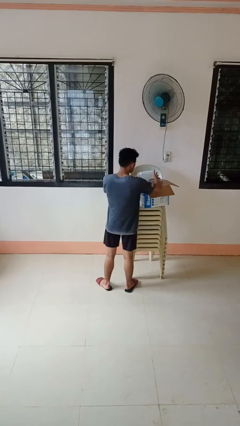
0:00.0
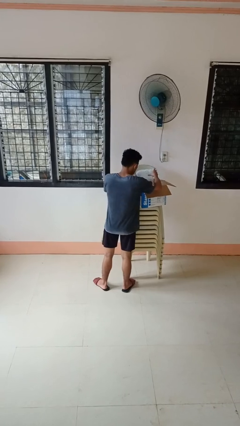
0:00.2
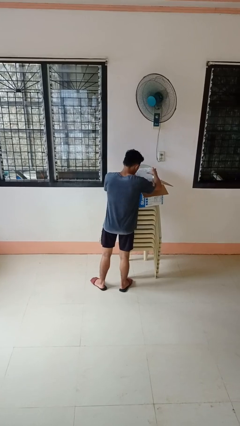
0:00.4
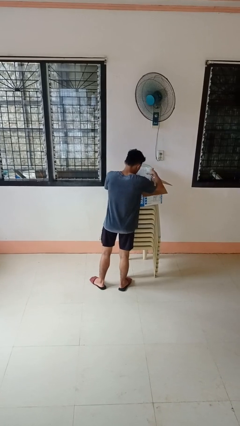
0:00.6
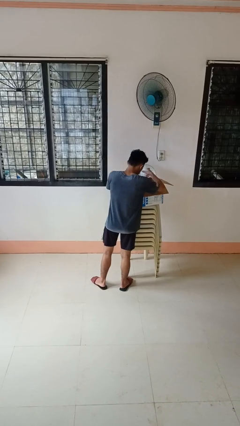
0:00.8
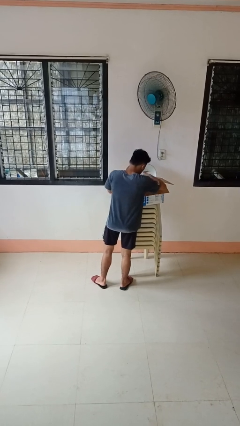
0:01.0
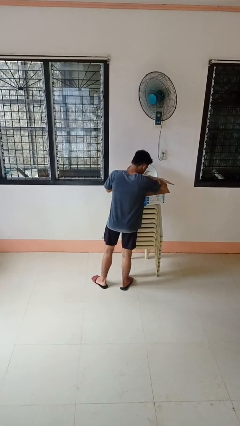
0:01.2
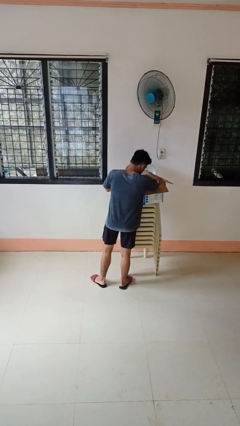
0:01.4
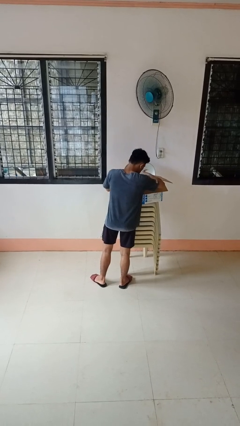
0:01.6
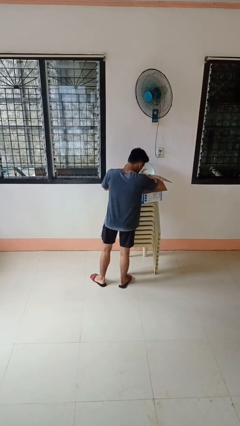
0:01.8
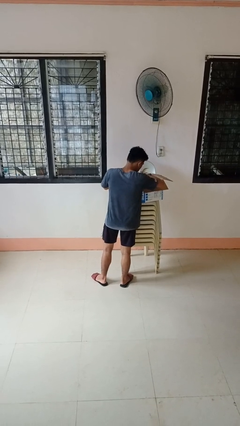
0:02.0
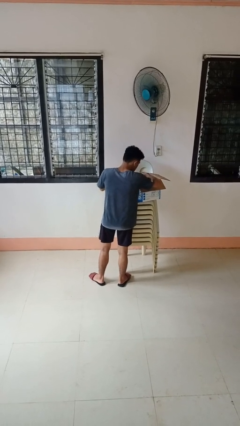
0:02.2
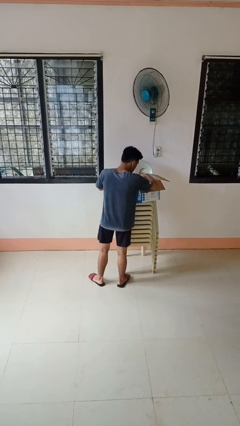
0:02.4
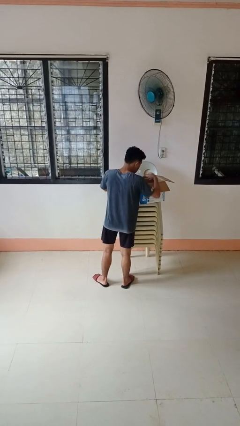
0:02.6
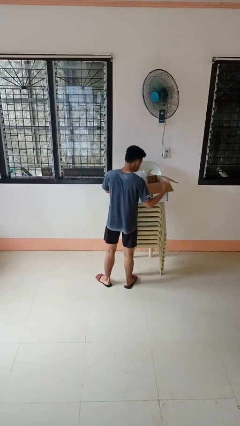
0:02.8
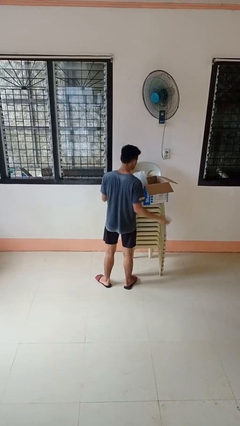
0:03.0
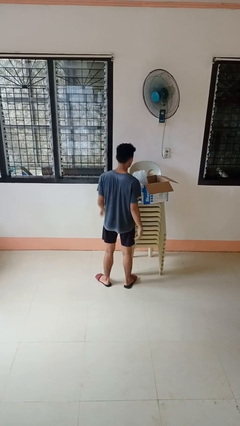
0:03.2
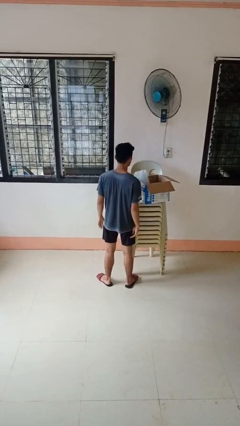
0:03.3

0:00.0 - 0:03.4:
person searches in box

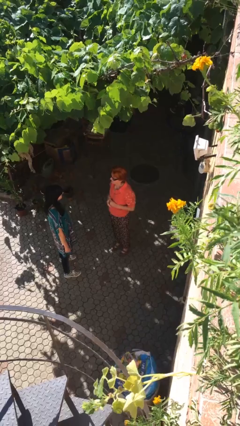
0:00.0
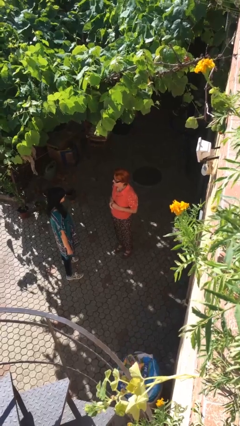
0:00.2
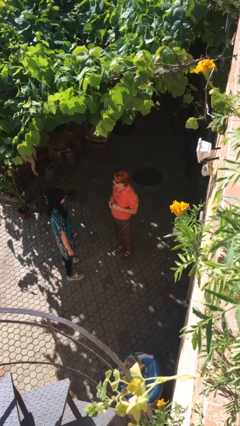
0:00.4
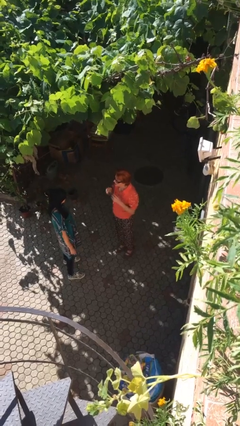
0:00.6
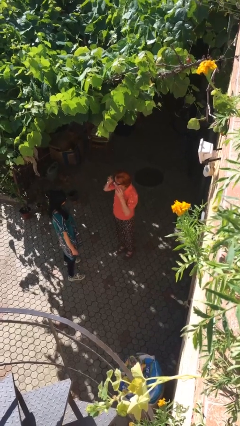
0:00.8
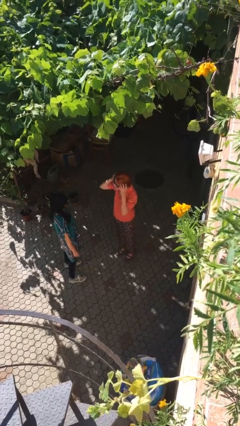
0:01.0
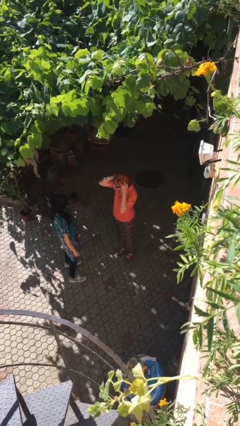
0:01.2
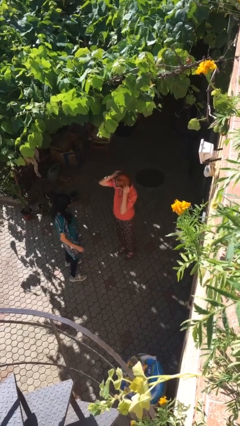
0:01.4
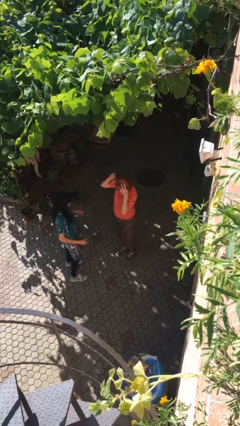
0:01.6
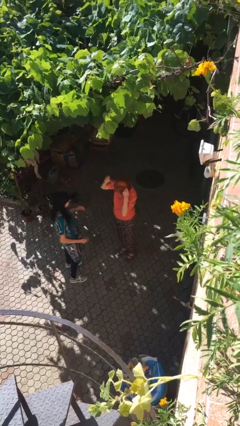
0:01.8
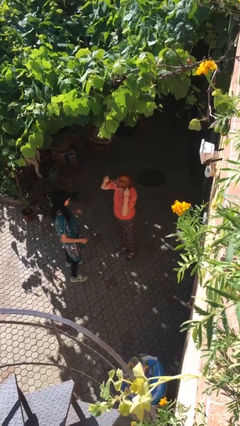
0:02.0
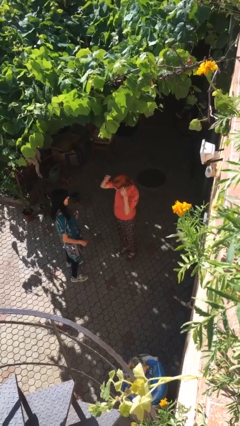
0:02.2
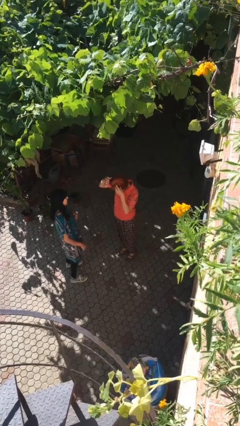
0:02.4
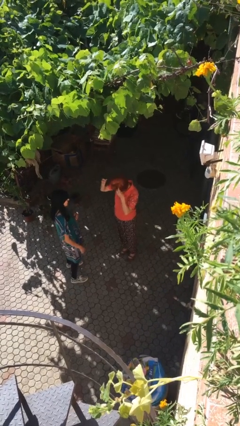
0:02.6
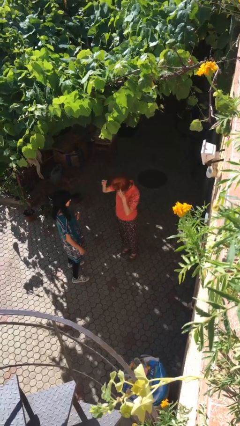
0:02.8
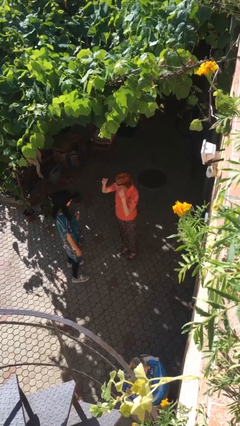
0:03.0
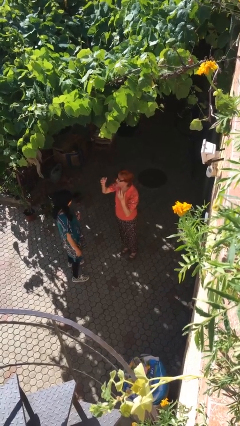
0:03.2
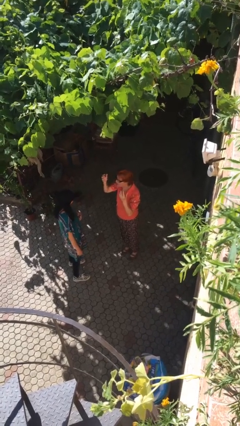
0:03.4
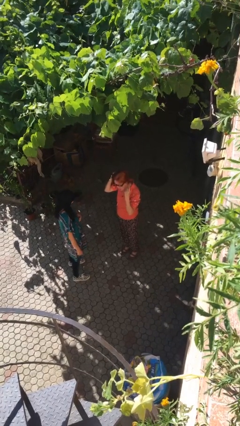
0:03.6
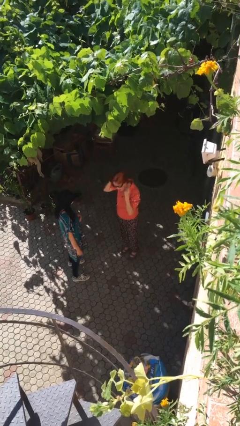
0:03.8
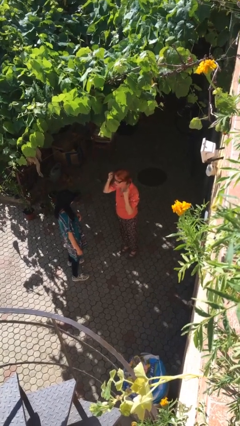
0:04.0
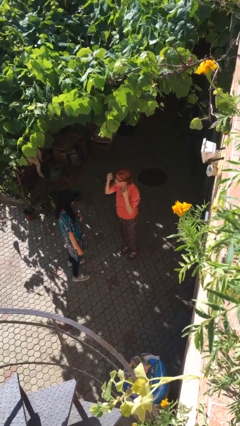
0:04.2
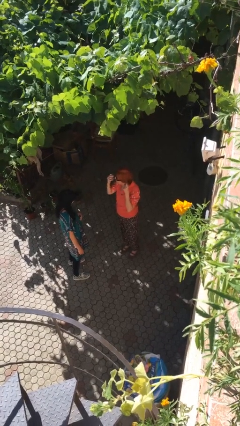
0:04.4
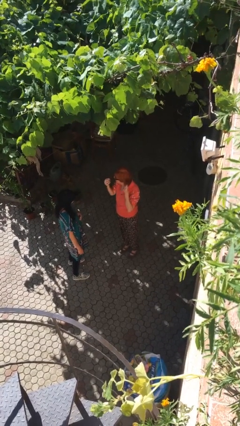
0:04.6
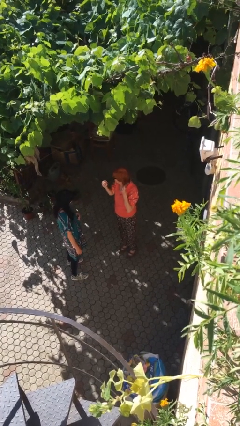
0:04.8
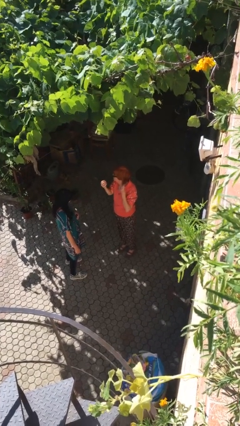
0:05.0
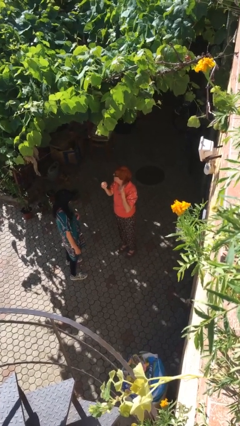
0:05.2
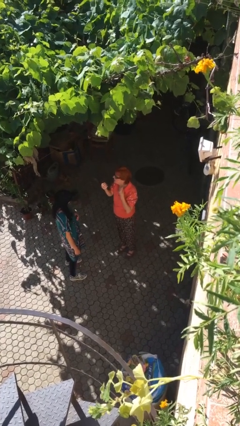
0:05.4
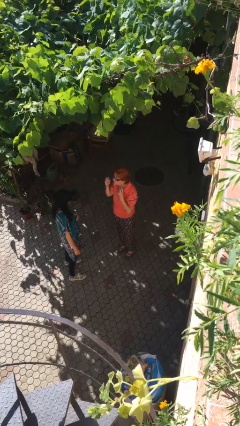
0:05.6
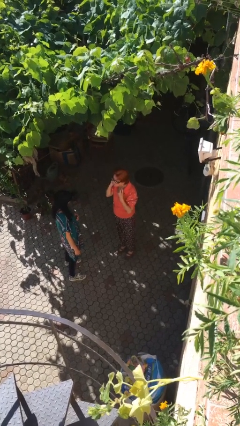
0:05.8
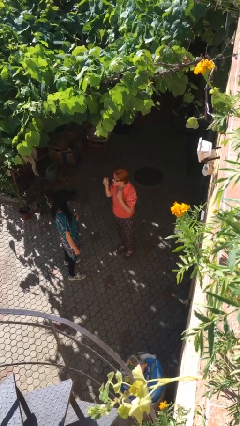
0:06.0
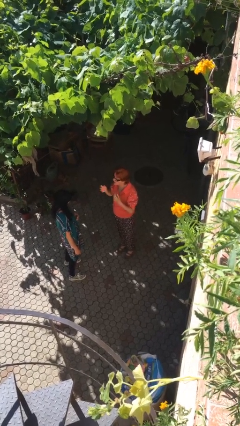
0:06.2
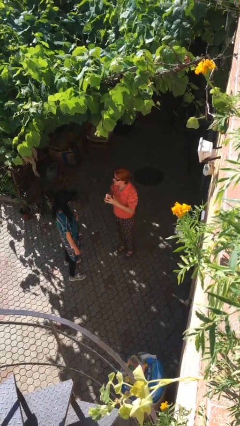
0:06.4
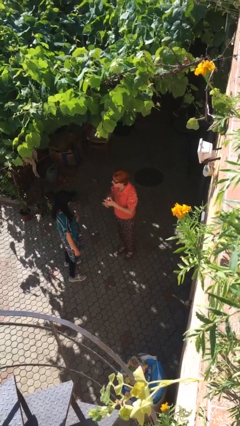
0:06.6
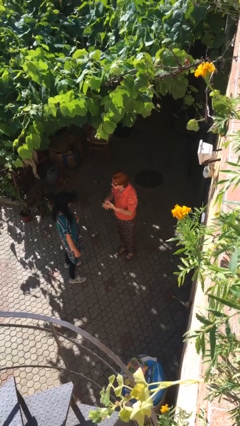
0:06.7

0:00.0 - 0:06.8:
person talks to person

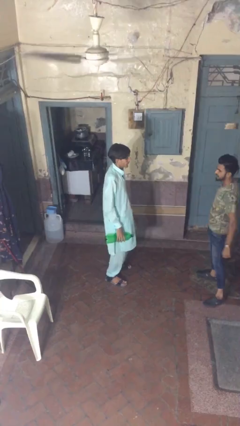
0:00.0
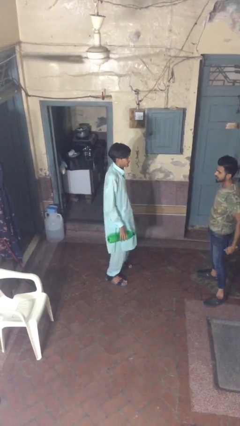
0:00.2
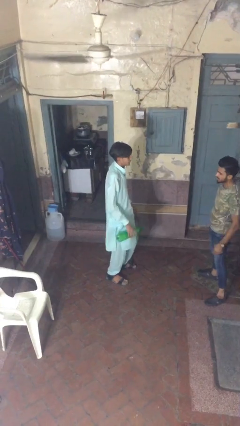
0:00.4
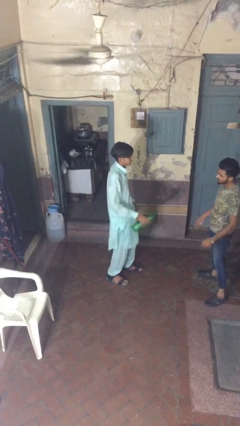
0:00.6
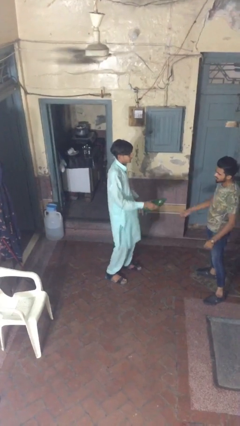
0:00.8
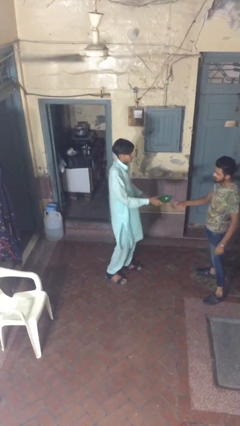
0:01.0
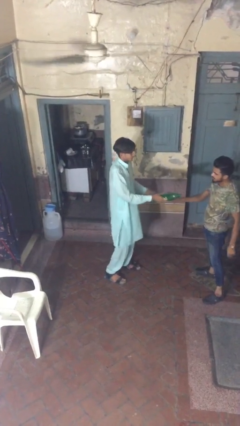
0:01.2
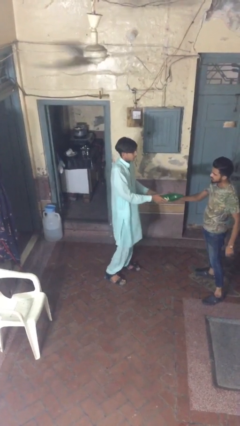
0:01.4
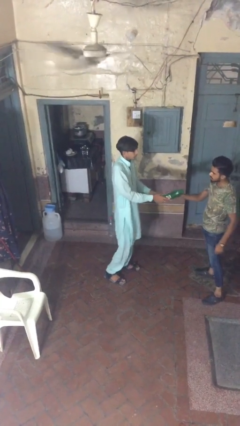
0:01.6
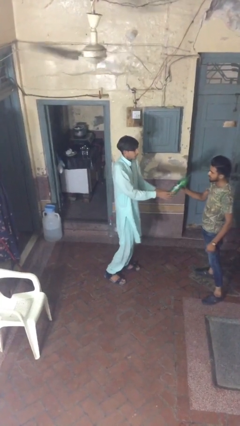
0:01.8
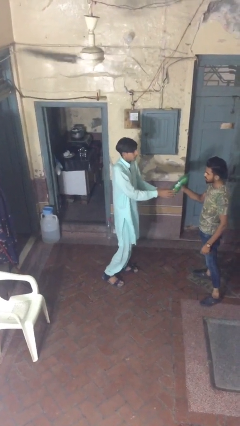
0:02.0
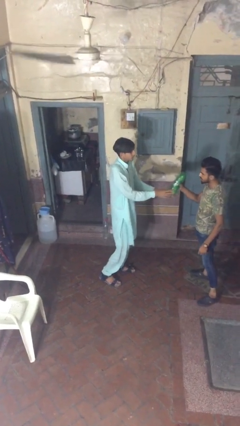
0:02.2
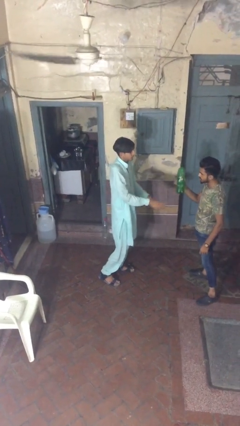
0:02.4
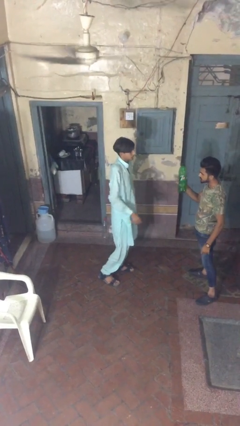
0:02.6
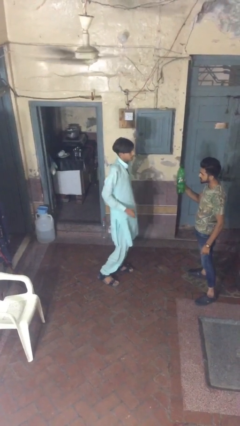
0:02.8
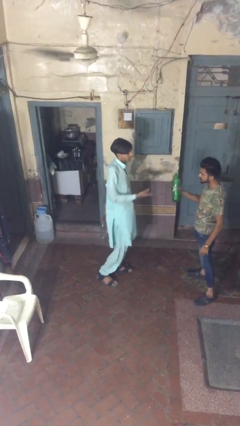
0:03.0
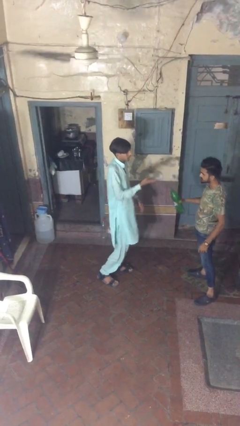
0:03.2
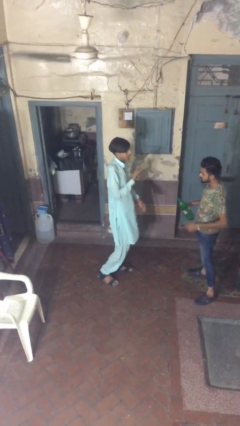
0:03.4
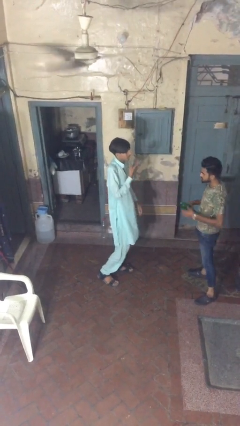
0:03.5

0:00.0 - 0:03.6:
person transfers object to person

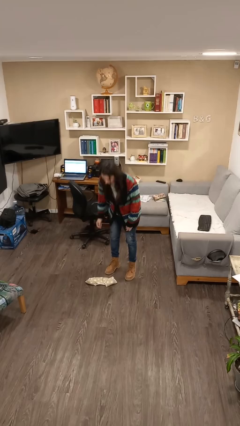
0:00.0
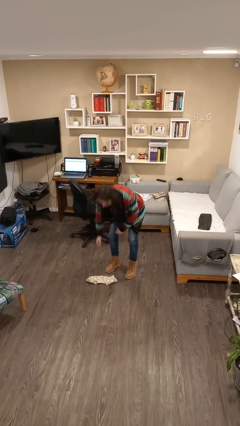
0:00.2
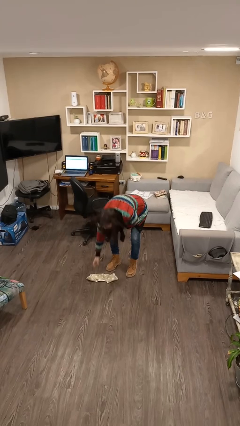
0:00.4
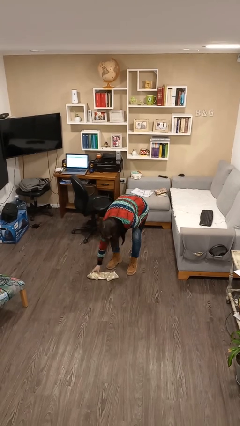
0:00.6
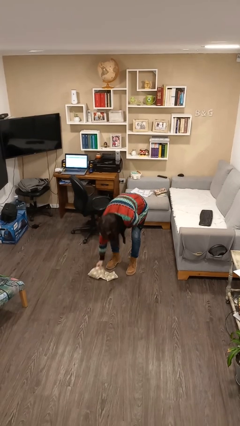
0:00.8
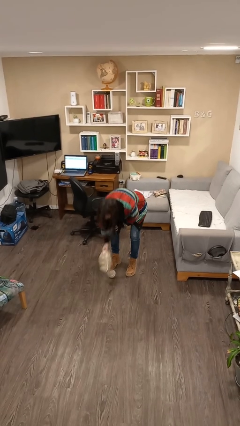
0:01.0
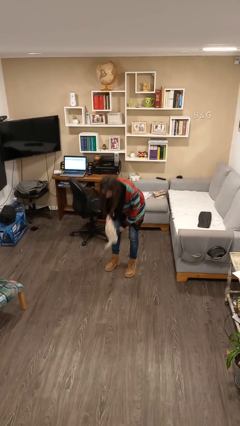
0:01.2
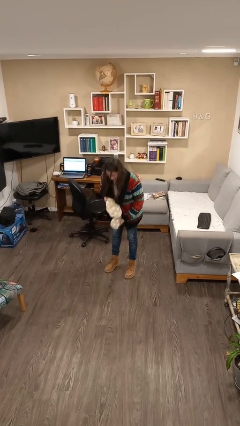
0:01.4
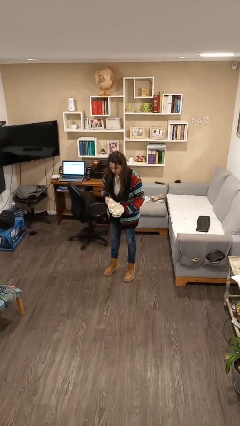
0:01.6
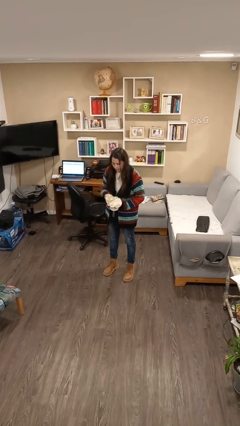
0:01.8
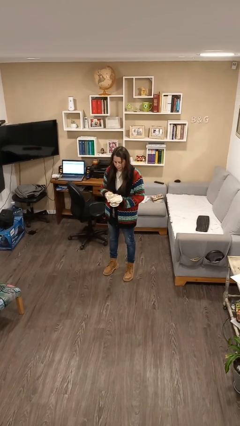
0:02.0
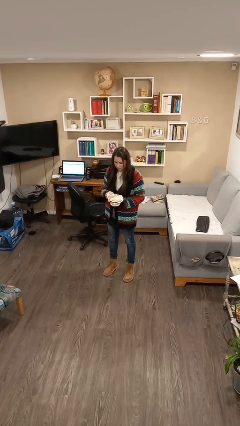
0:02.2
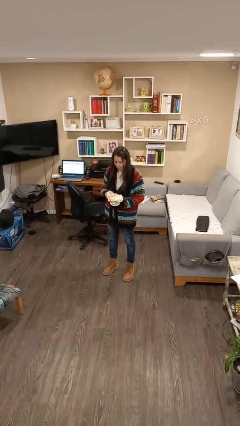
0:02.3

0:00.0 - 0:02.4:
person picks up object from floor

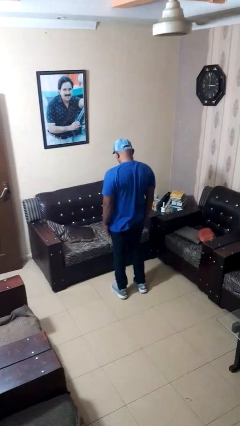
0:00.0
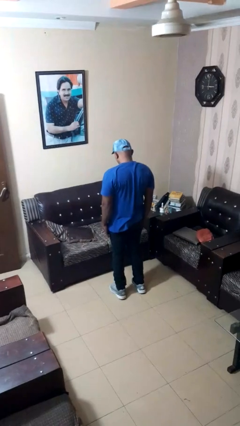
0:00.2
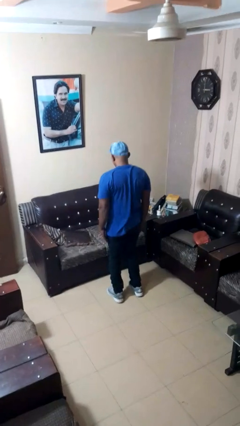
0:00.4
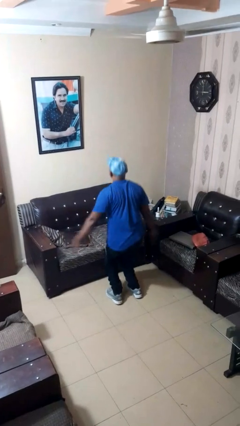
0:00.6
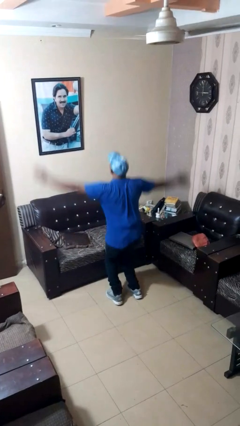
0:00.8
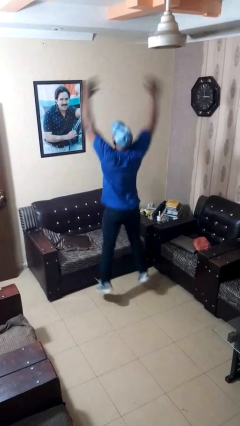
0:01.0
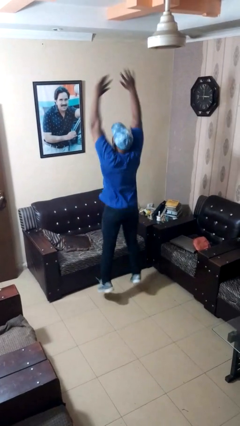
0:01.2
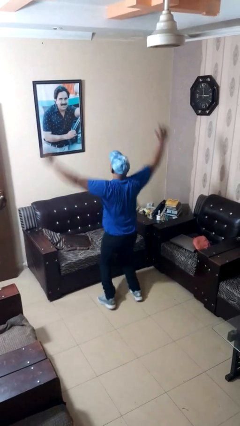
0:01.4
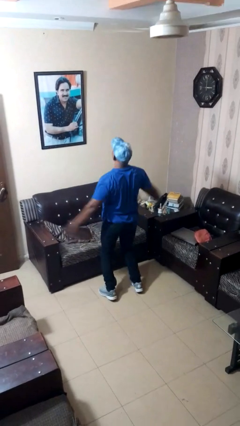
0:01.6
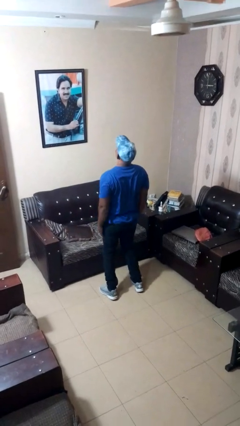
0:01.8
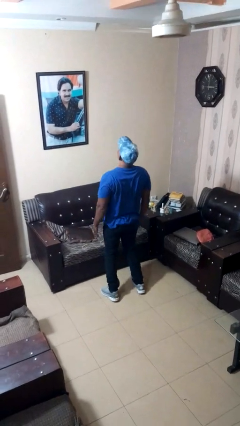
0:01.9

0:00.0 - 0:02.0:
person exercises with jumping jacks
